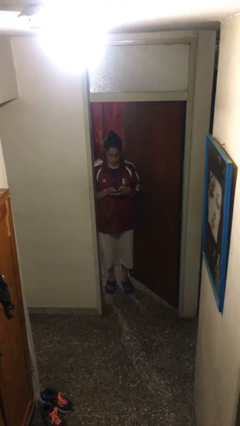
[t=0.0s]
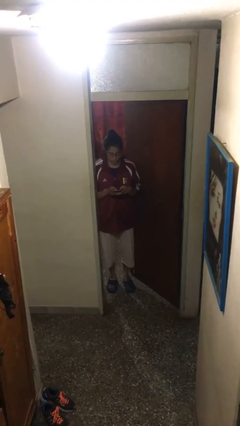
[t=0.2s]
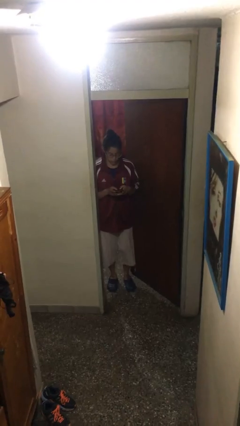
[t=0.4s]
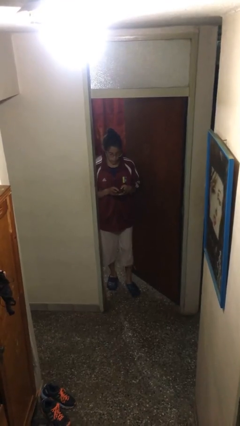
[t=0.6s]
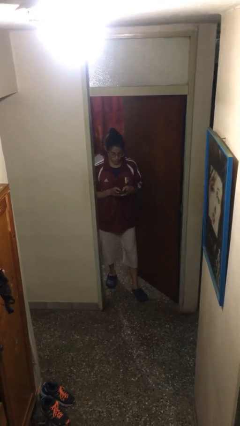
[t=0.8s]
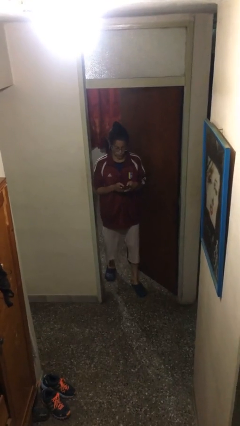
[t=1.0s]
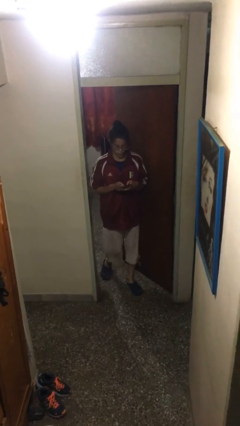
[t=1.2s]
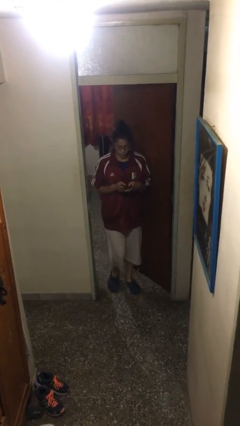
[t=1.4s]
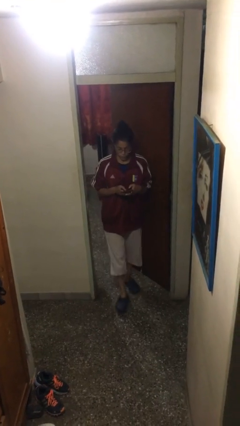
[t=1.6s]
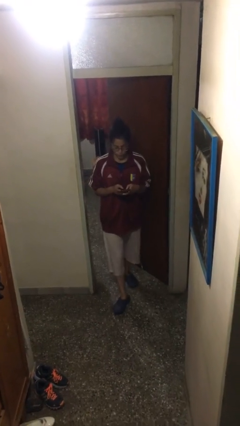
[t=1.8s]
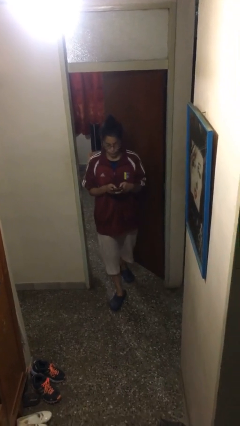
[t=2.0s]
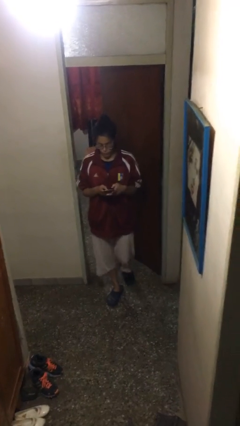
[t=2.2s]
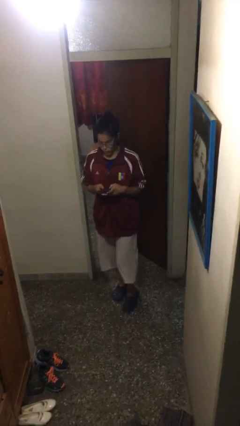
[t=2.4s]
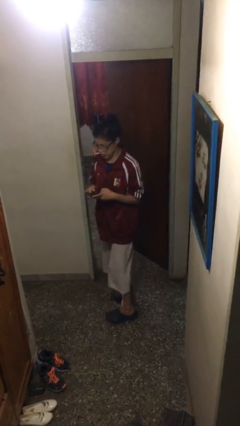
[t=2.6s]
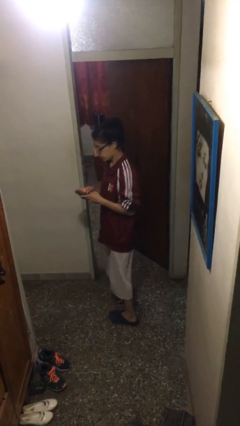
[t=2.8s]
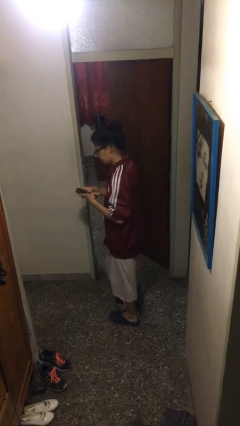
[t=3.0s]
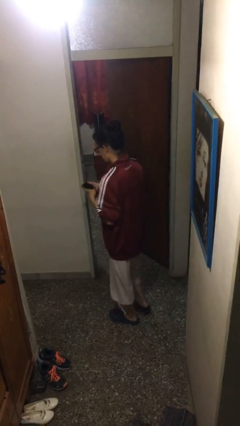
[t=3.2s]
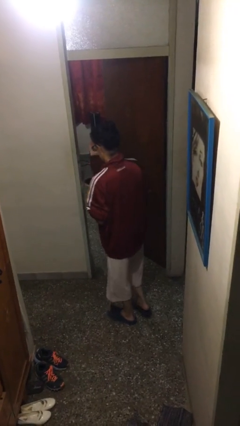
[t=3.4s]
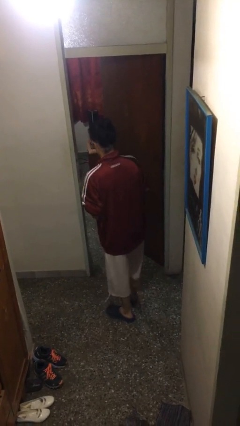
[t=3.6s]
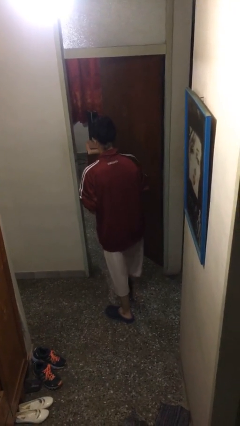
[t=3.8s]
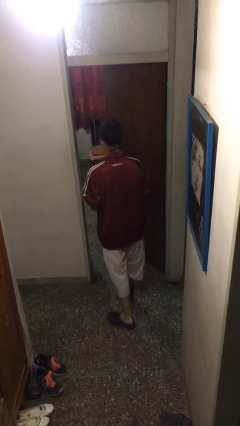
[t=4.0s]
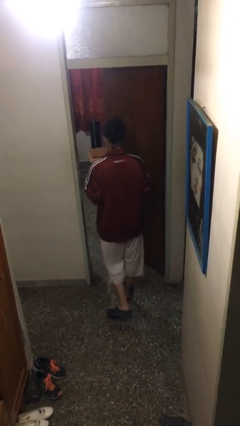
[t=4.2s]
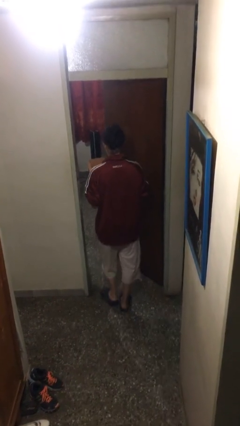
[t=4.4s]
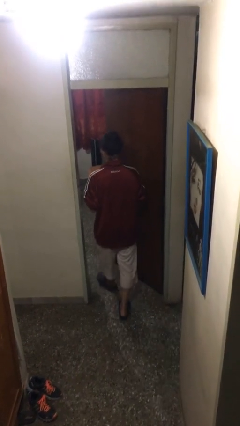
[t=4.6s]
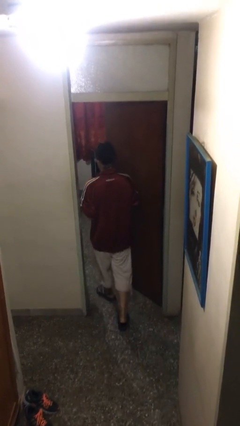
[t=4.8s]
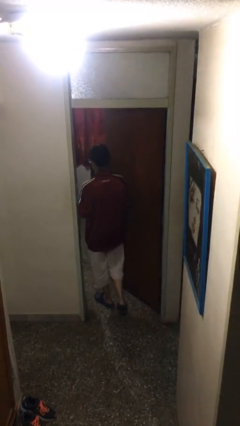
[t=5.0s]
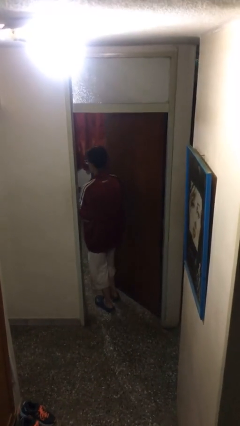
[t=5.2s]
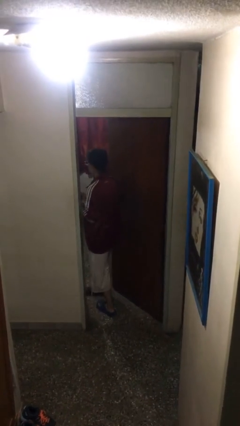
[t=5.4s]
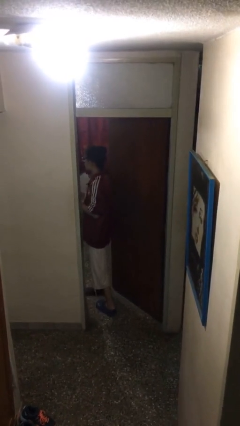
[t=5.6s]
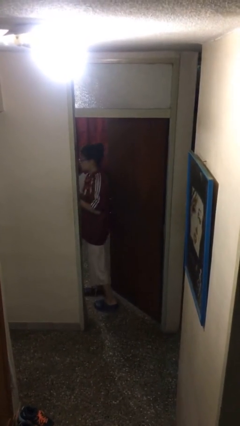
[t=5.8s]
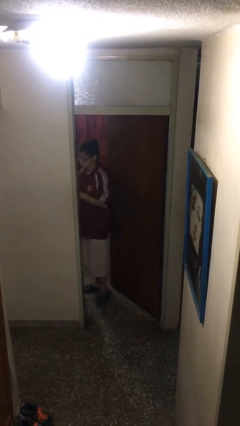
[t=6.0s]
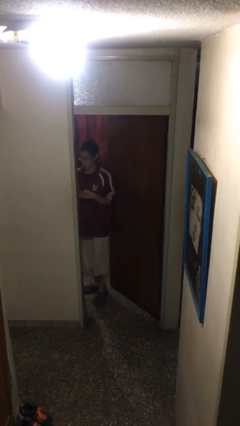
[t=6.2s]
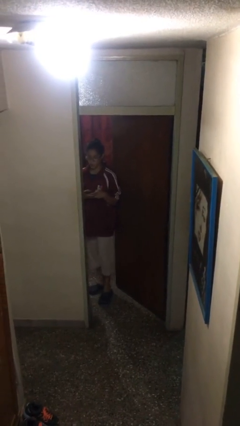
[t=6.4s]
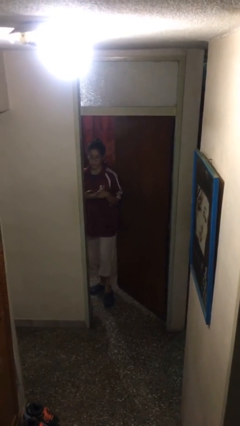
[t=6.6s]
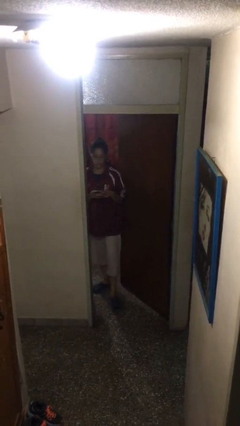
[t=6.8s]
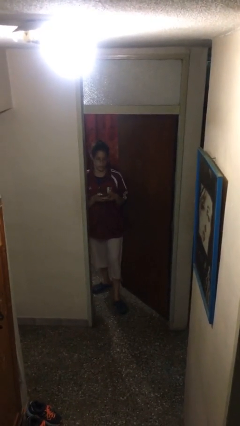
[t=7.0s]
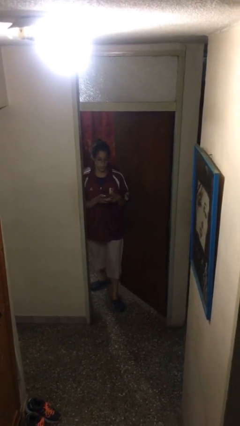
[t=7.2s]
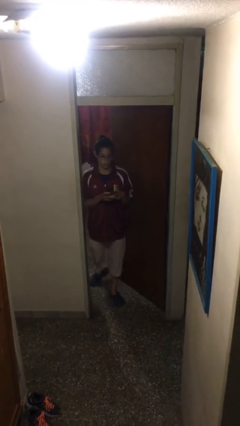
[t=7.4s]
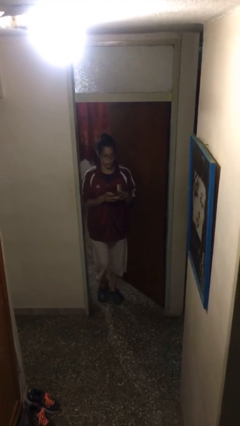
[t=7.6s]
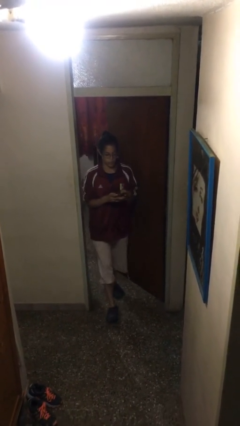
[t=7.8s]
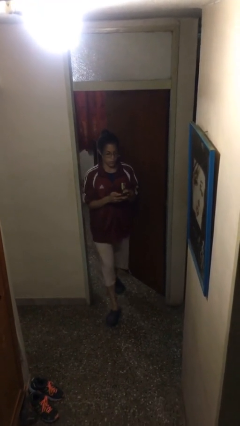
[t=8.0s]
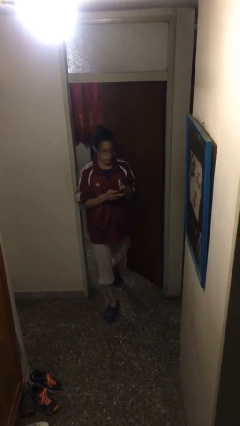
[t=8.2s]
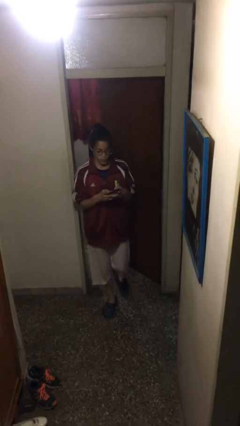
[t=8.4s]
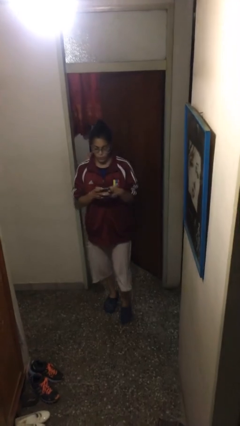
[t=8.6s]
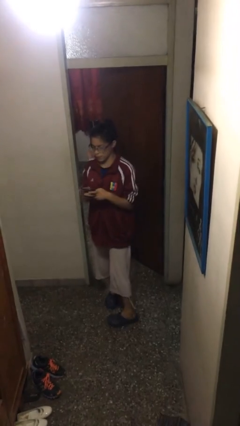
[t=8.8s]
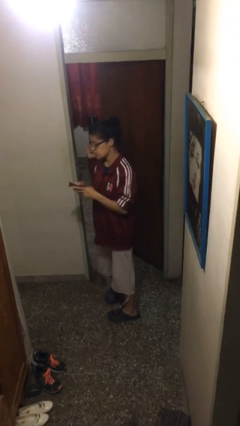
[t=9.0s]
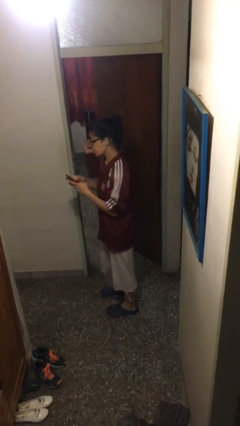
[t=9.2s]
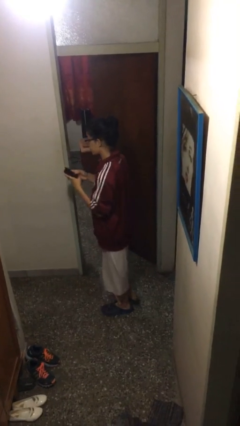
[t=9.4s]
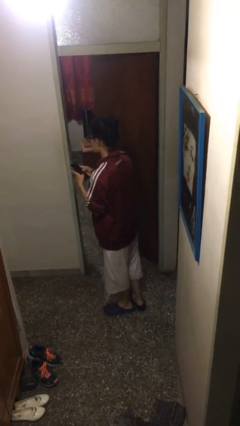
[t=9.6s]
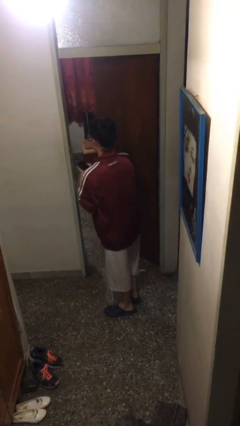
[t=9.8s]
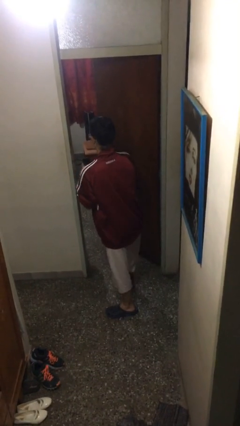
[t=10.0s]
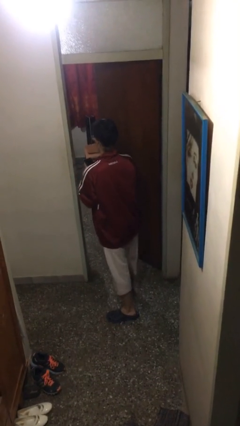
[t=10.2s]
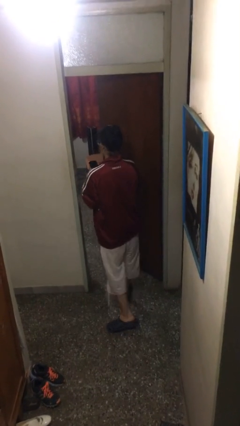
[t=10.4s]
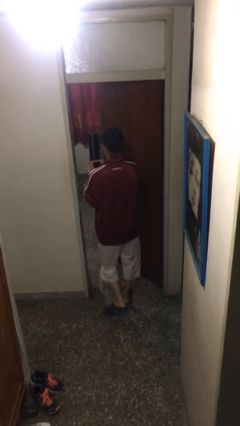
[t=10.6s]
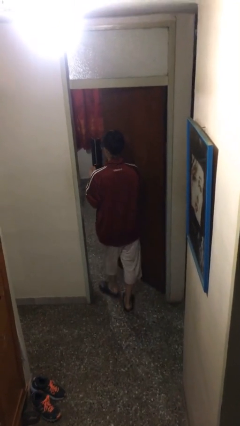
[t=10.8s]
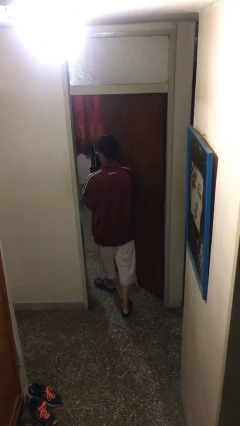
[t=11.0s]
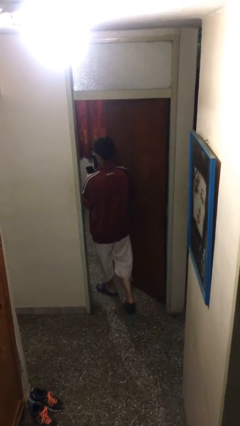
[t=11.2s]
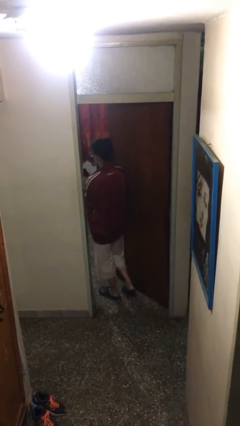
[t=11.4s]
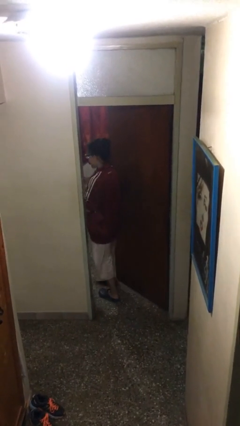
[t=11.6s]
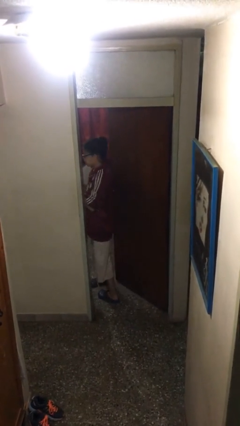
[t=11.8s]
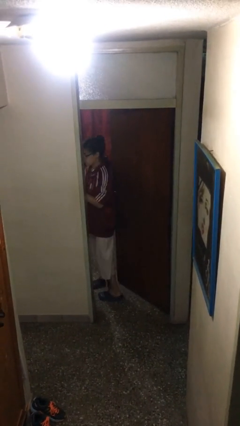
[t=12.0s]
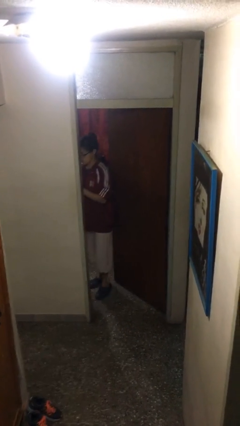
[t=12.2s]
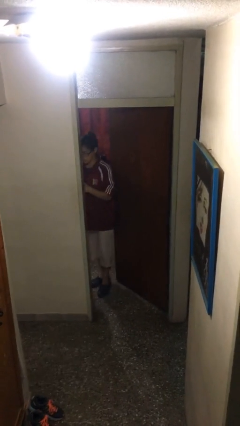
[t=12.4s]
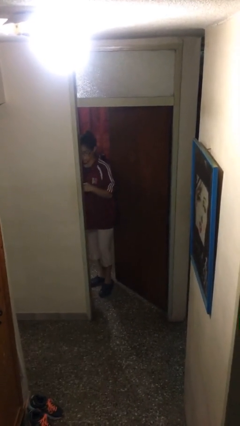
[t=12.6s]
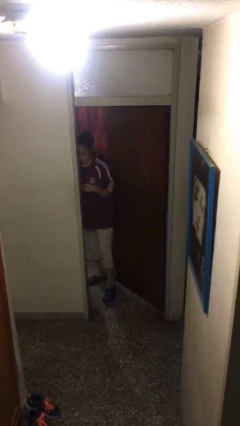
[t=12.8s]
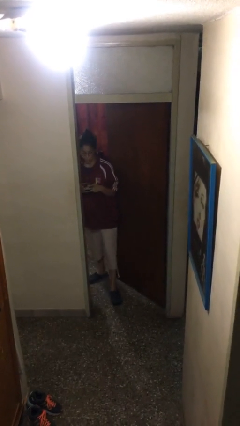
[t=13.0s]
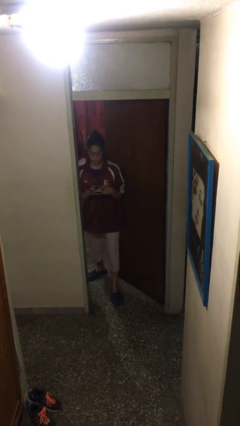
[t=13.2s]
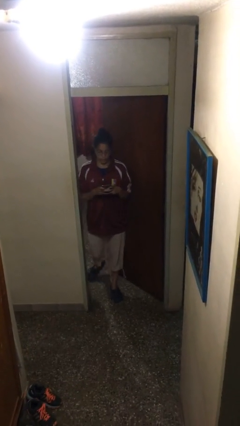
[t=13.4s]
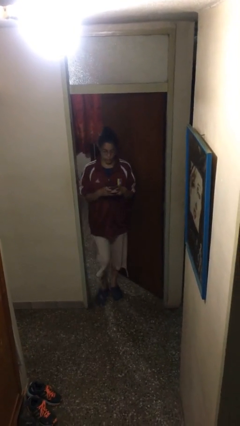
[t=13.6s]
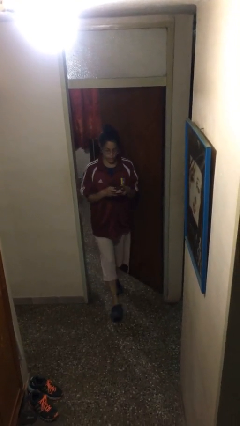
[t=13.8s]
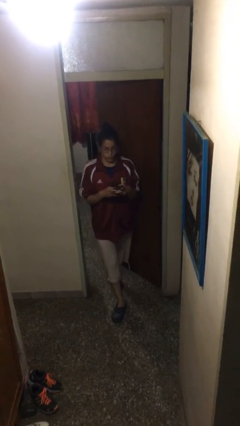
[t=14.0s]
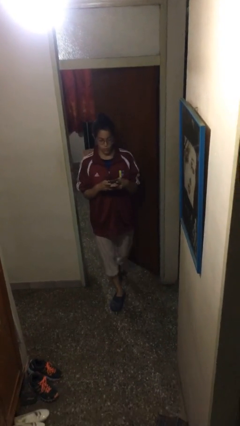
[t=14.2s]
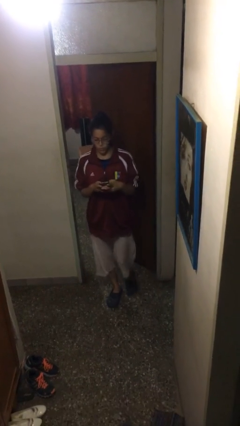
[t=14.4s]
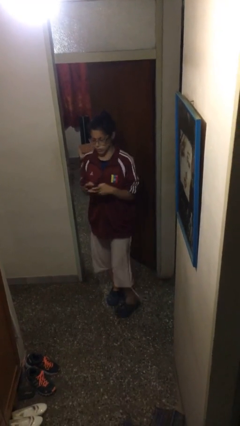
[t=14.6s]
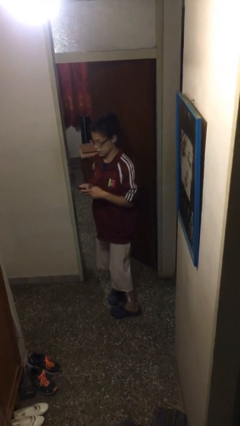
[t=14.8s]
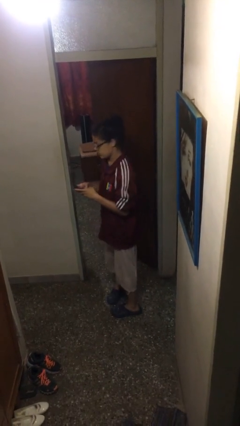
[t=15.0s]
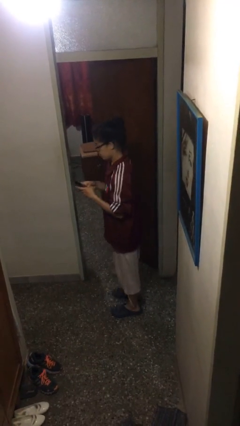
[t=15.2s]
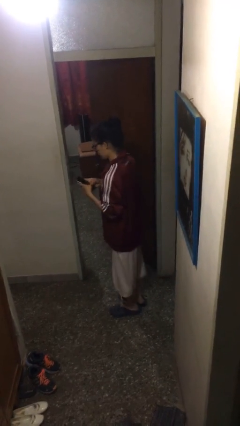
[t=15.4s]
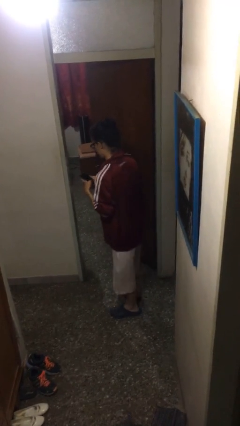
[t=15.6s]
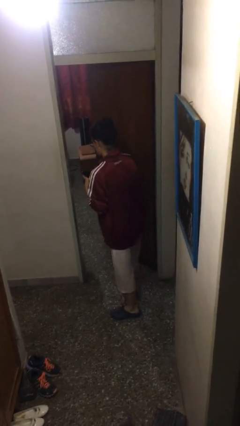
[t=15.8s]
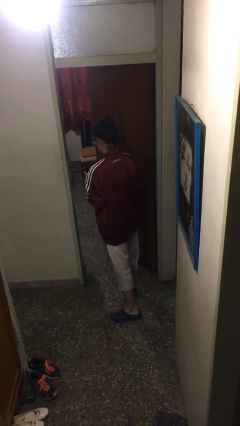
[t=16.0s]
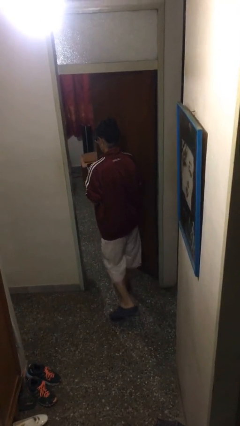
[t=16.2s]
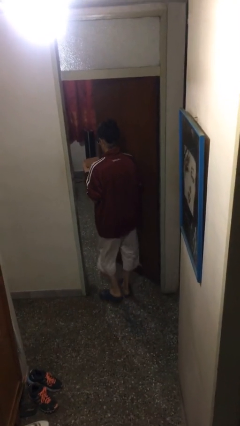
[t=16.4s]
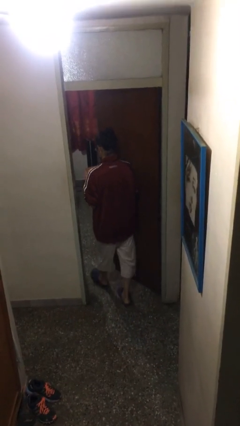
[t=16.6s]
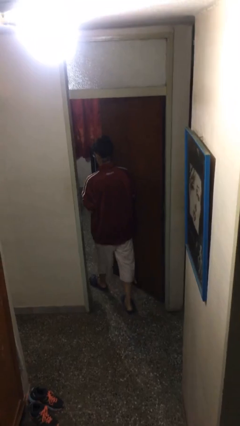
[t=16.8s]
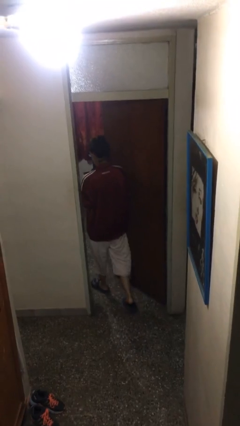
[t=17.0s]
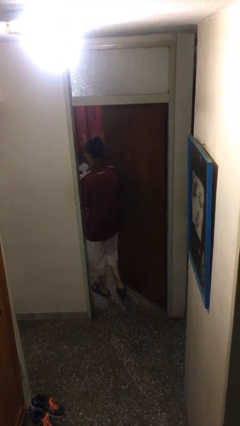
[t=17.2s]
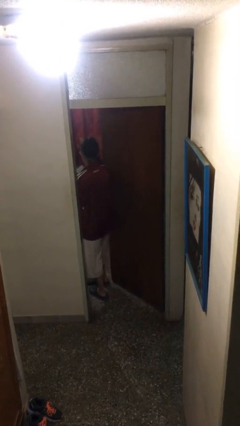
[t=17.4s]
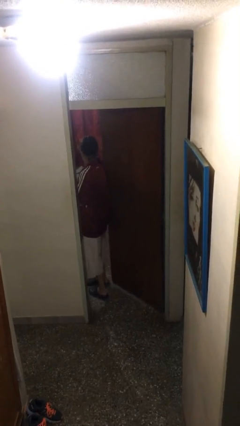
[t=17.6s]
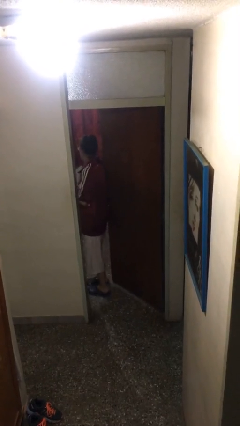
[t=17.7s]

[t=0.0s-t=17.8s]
person texts on phone

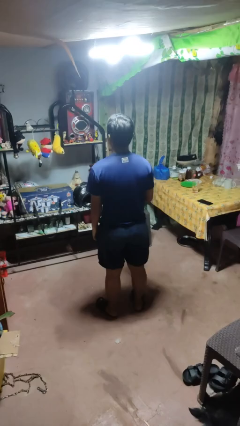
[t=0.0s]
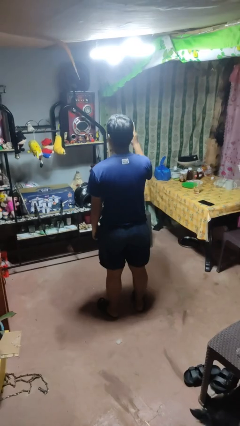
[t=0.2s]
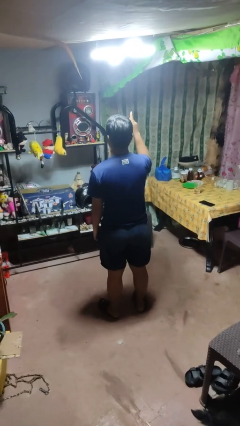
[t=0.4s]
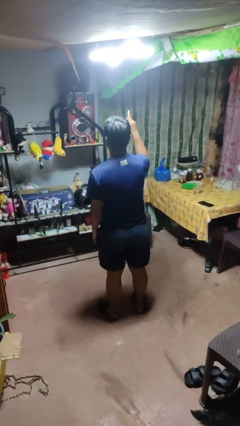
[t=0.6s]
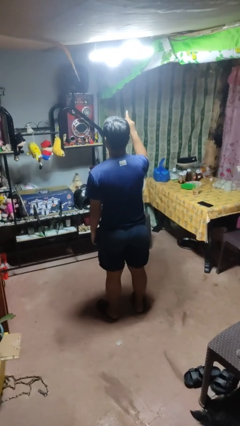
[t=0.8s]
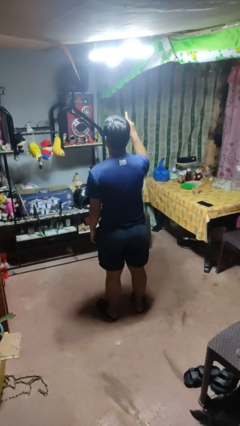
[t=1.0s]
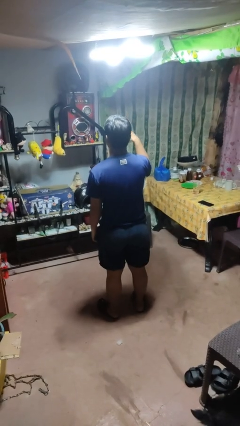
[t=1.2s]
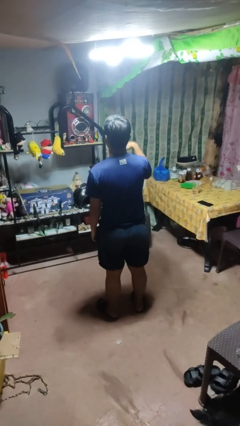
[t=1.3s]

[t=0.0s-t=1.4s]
person gestures number one
